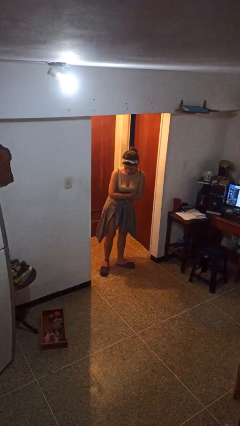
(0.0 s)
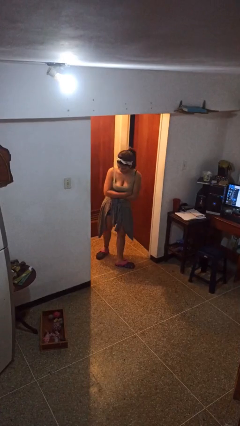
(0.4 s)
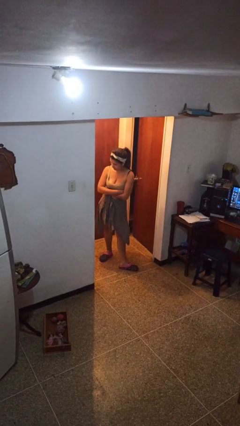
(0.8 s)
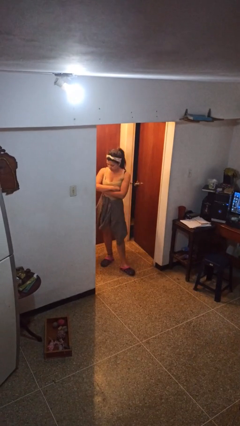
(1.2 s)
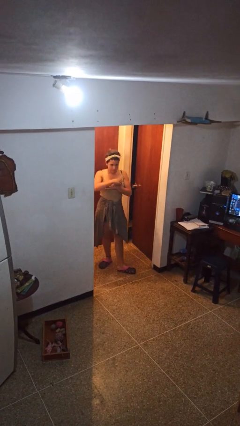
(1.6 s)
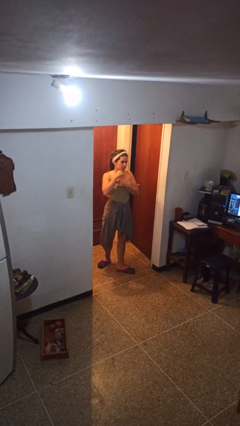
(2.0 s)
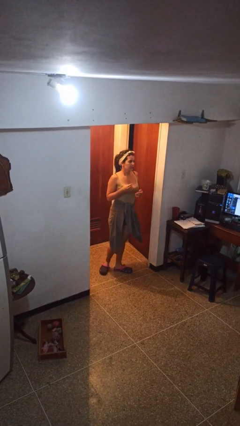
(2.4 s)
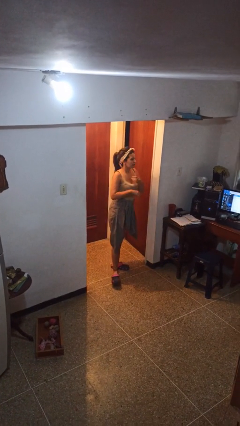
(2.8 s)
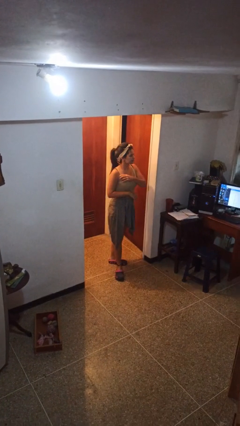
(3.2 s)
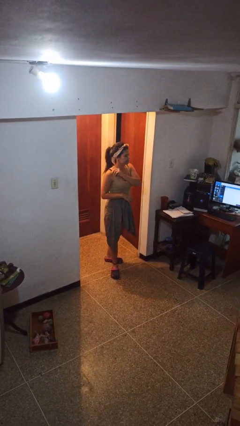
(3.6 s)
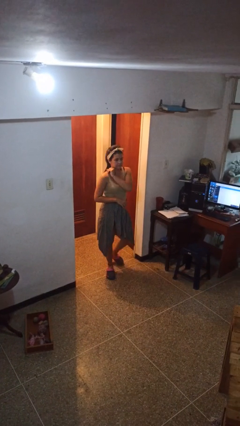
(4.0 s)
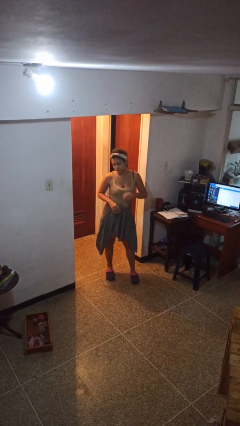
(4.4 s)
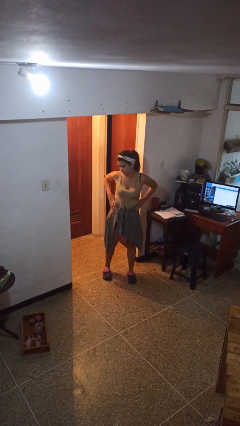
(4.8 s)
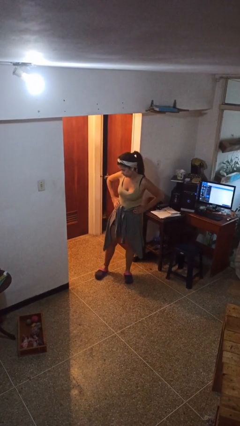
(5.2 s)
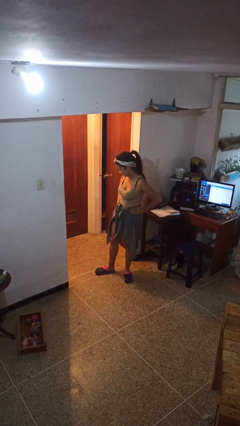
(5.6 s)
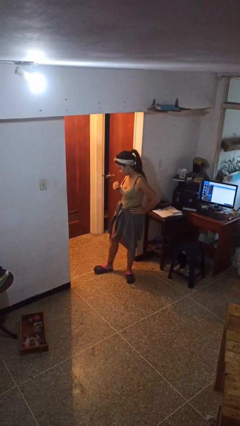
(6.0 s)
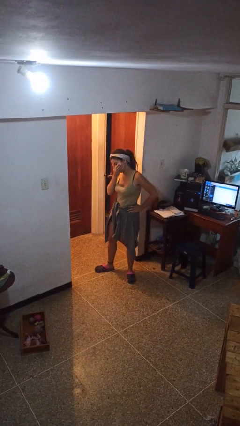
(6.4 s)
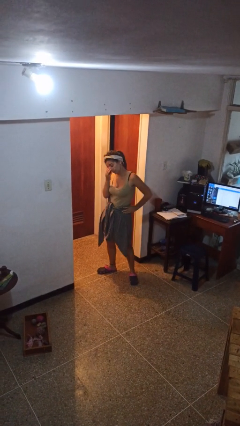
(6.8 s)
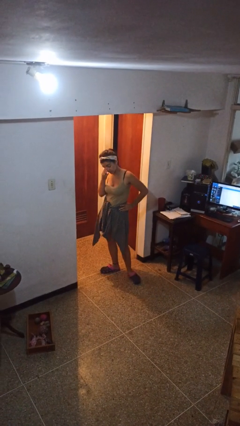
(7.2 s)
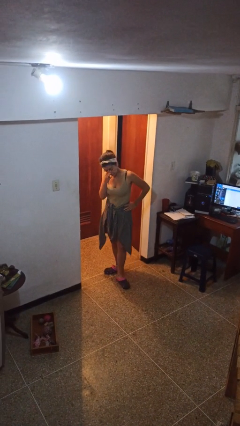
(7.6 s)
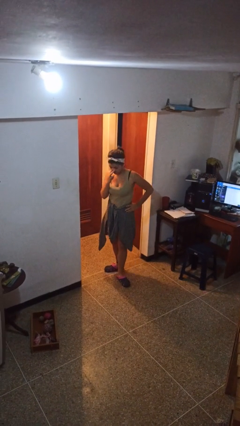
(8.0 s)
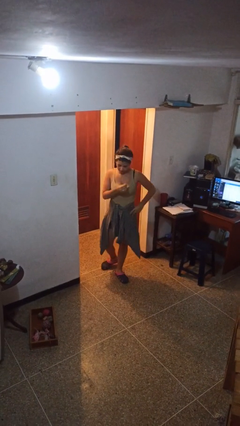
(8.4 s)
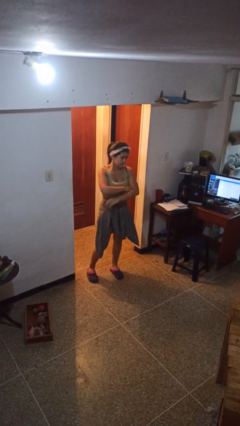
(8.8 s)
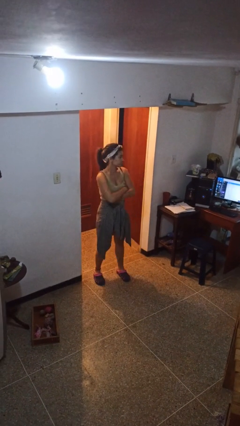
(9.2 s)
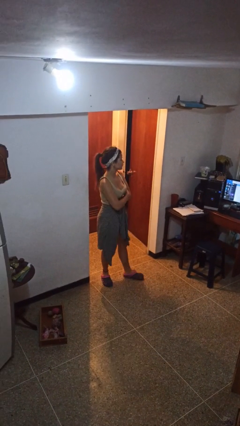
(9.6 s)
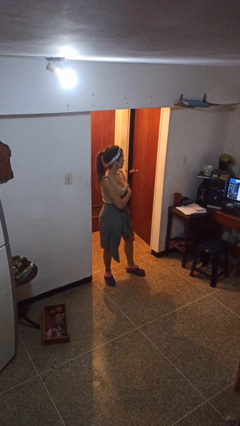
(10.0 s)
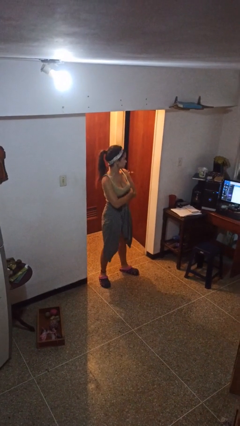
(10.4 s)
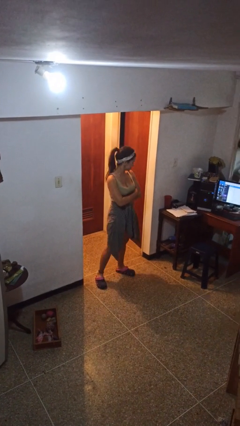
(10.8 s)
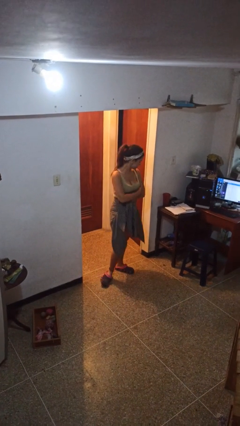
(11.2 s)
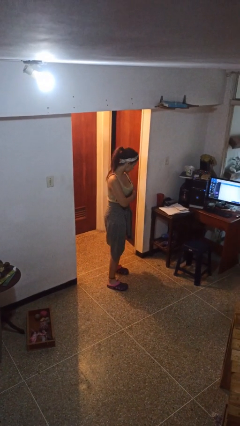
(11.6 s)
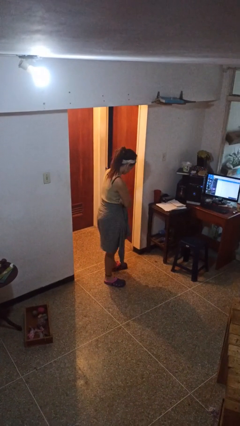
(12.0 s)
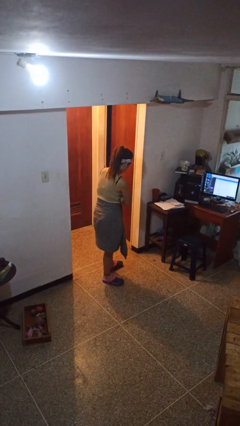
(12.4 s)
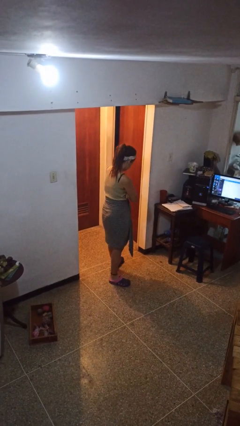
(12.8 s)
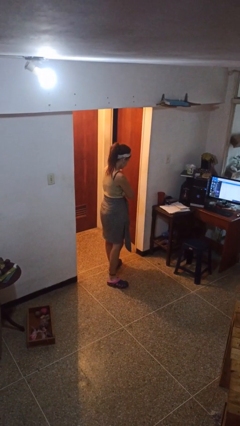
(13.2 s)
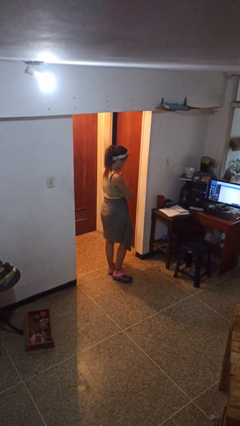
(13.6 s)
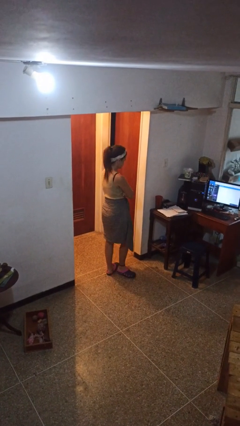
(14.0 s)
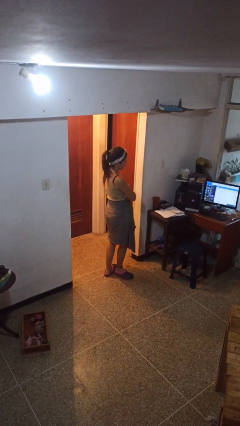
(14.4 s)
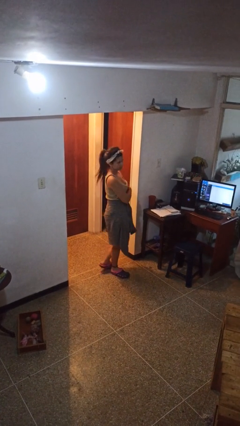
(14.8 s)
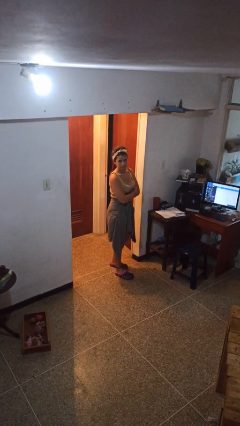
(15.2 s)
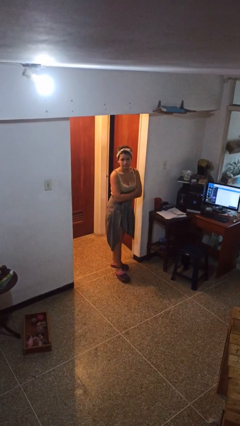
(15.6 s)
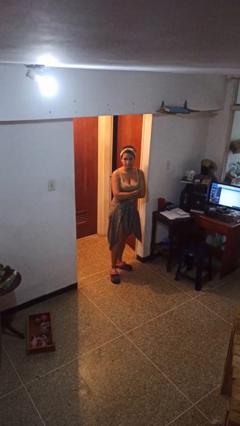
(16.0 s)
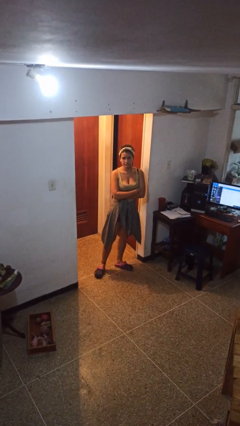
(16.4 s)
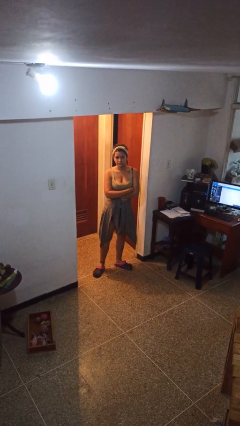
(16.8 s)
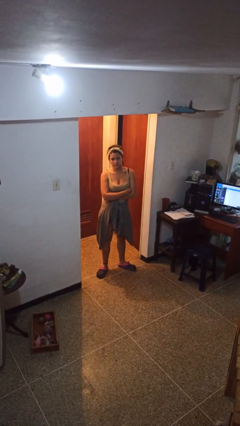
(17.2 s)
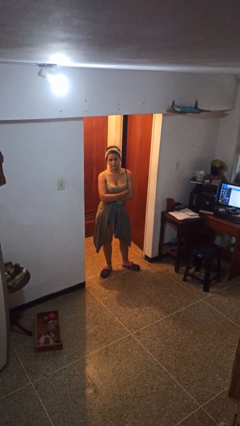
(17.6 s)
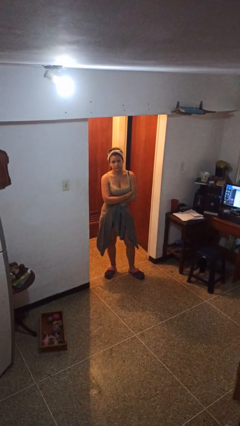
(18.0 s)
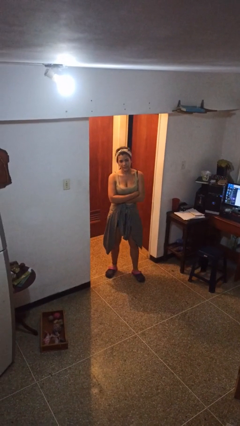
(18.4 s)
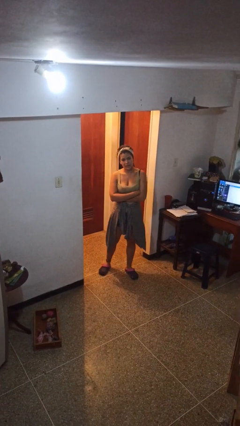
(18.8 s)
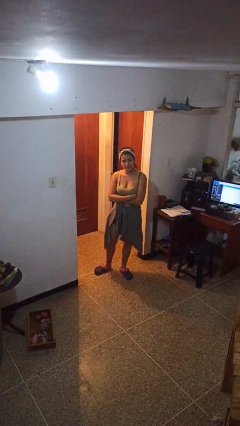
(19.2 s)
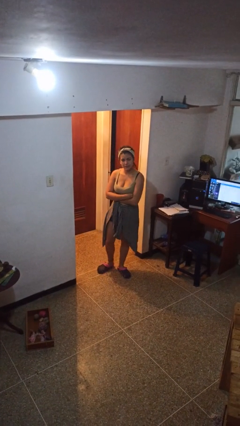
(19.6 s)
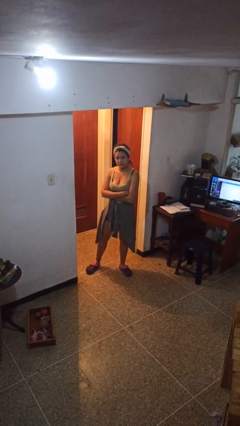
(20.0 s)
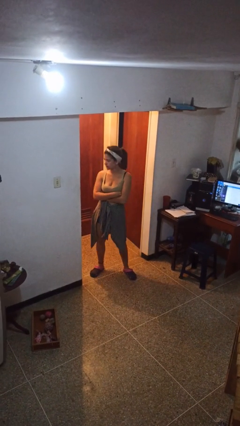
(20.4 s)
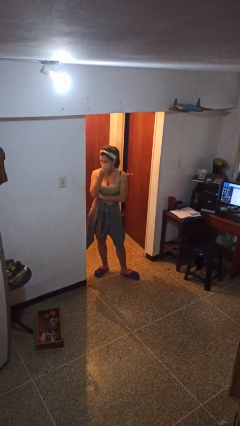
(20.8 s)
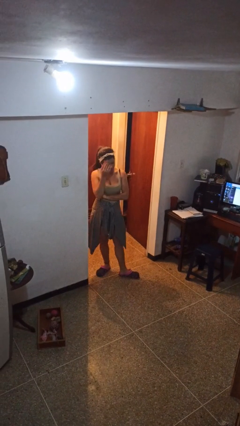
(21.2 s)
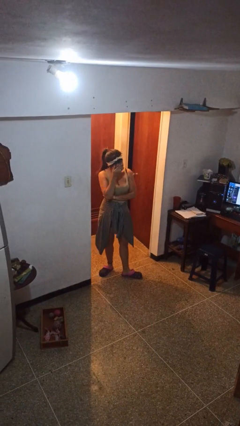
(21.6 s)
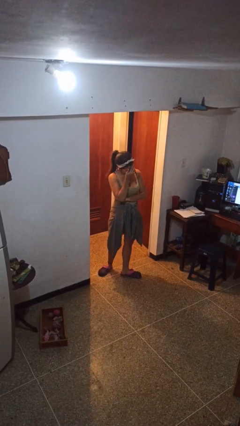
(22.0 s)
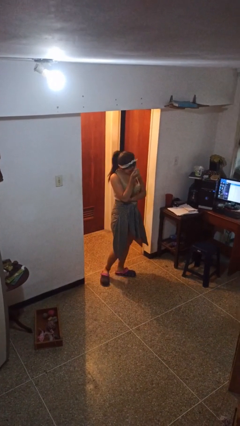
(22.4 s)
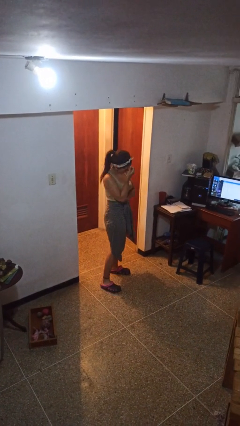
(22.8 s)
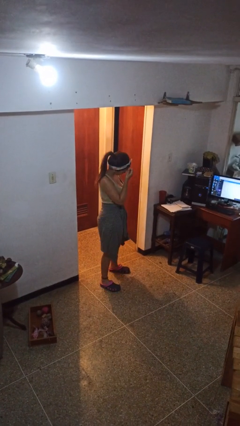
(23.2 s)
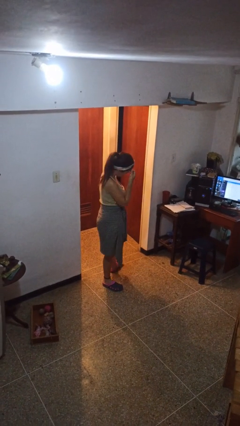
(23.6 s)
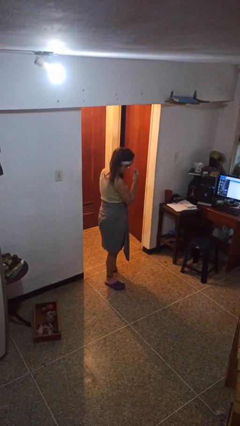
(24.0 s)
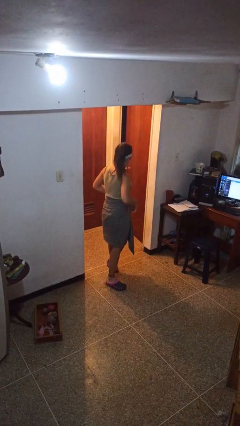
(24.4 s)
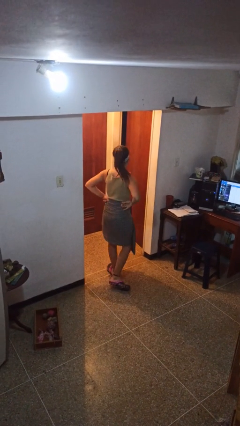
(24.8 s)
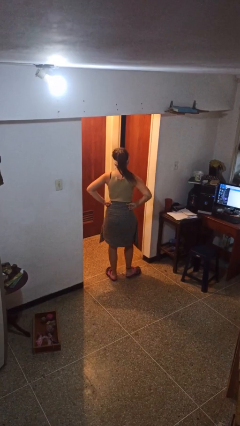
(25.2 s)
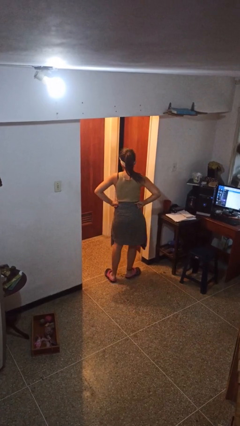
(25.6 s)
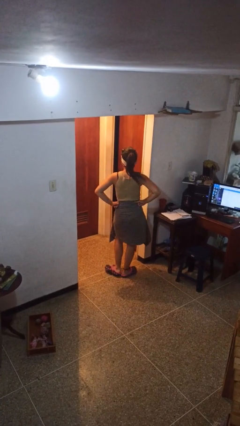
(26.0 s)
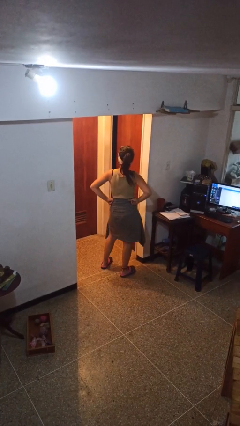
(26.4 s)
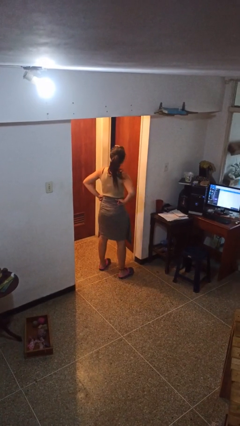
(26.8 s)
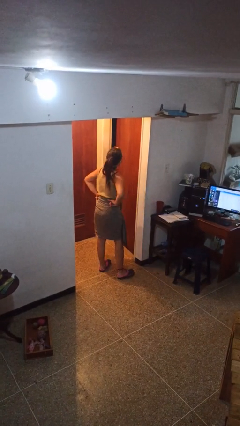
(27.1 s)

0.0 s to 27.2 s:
person walks

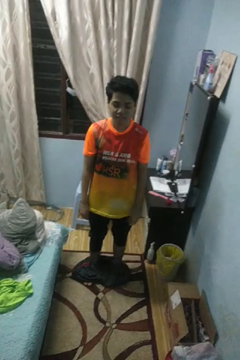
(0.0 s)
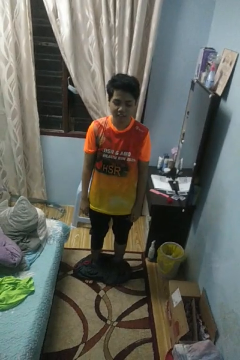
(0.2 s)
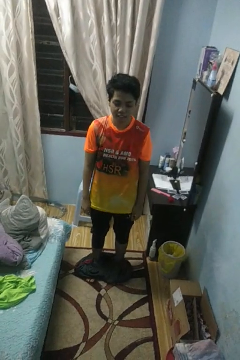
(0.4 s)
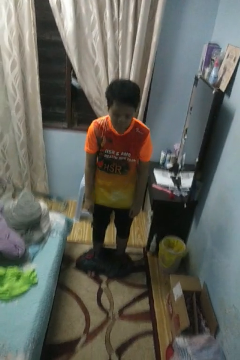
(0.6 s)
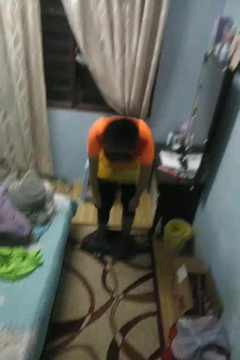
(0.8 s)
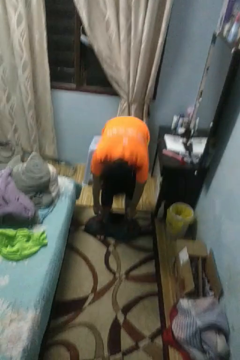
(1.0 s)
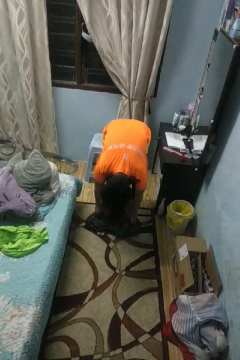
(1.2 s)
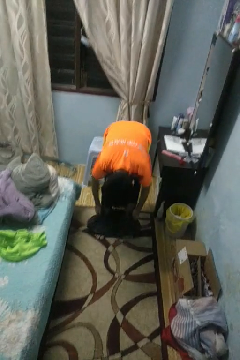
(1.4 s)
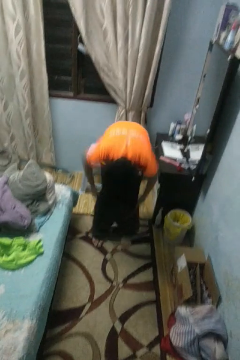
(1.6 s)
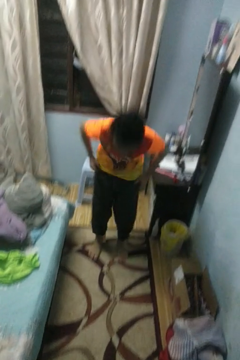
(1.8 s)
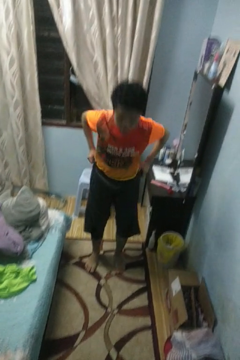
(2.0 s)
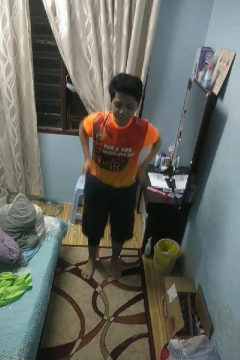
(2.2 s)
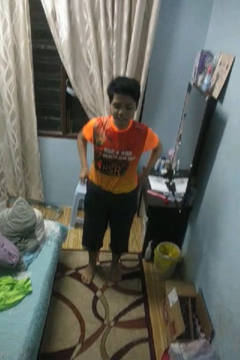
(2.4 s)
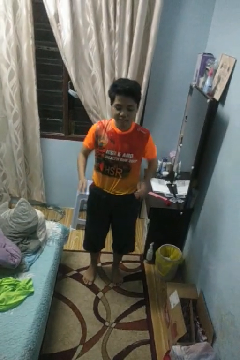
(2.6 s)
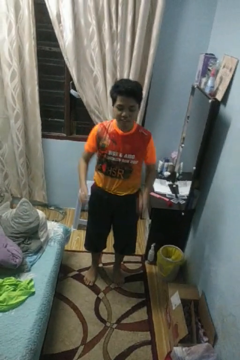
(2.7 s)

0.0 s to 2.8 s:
person puts on pants

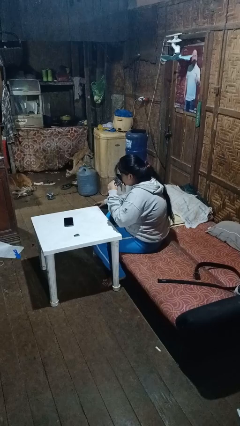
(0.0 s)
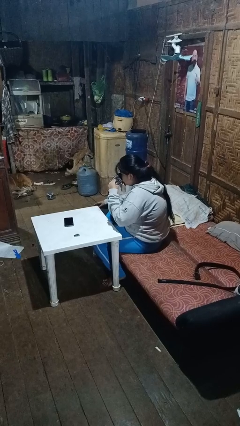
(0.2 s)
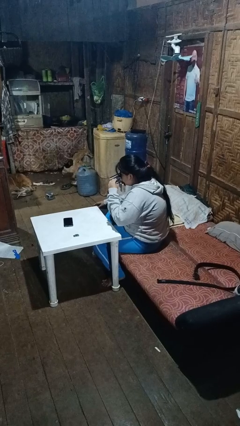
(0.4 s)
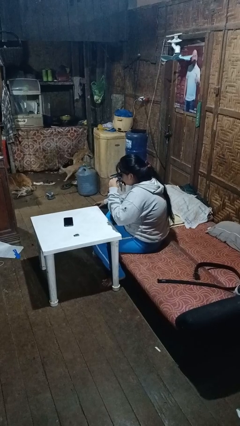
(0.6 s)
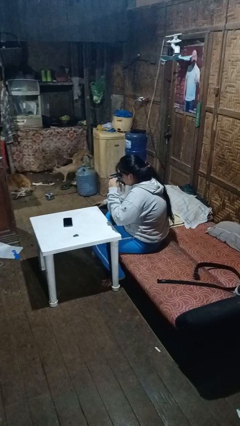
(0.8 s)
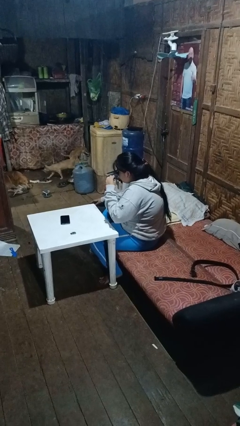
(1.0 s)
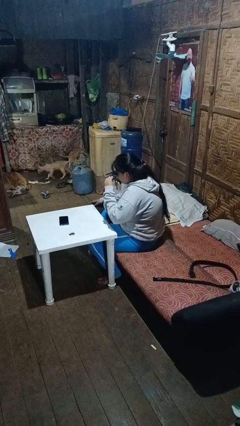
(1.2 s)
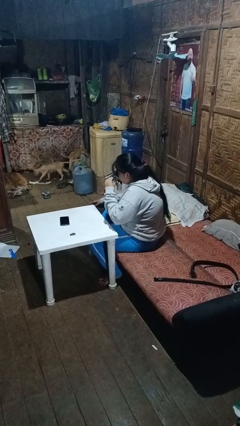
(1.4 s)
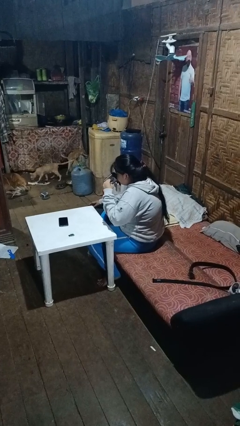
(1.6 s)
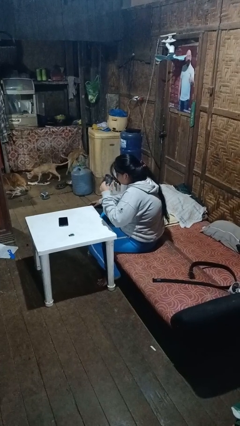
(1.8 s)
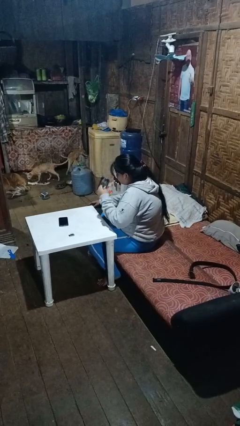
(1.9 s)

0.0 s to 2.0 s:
person drinks from mug

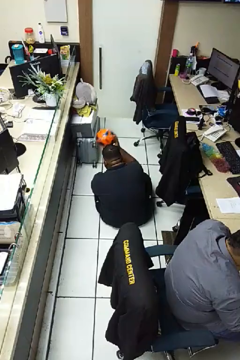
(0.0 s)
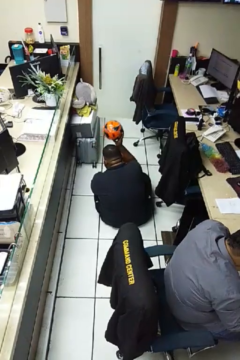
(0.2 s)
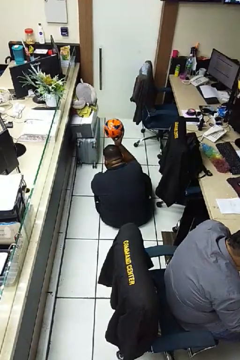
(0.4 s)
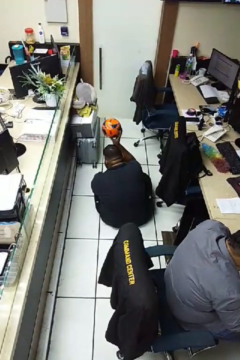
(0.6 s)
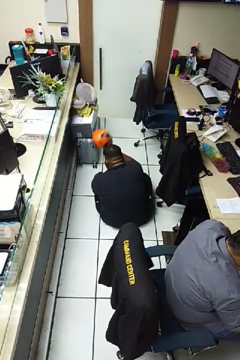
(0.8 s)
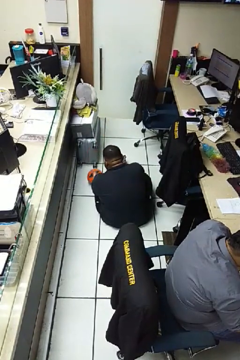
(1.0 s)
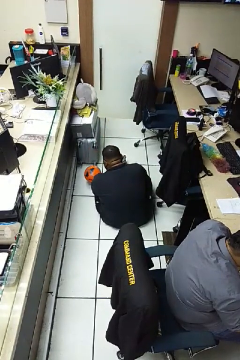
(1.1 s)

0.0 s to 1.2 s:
person bounces ball on floor
